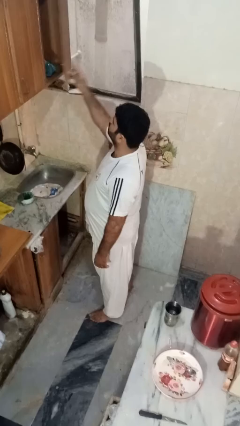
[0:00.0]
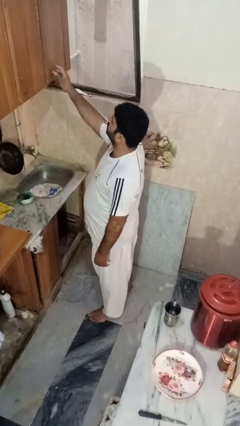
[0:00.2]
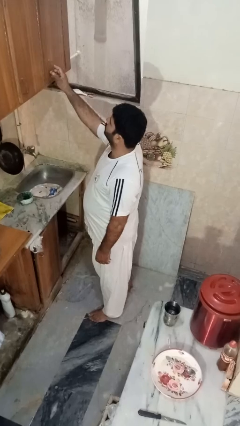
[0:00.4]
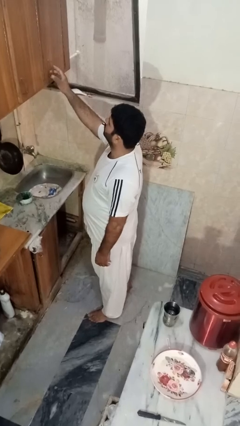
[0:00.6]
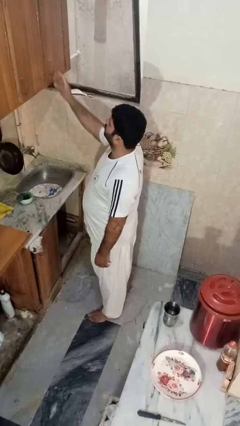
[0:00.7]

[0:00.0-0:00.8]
person closes cabinet

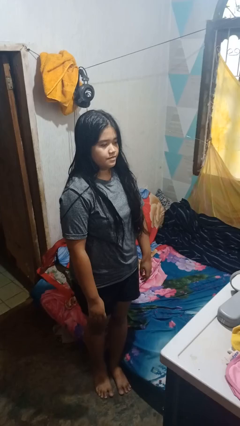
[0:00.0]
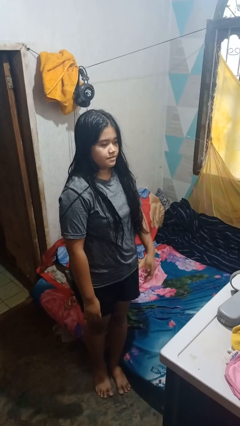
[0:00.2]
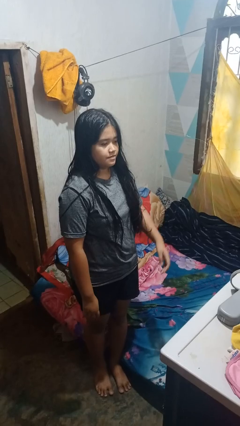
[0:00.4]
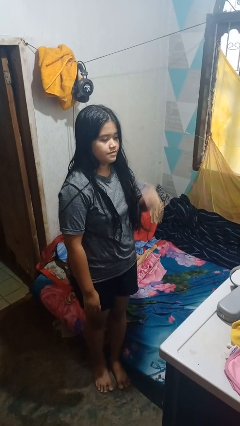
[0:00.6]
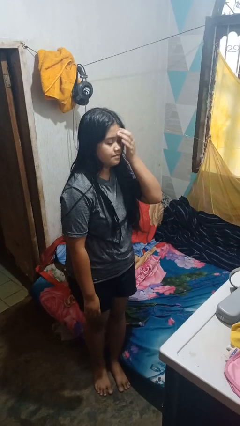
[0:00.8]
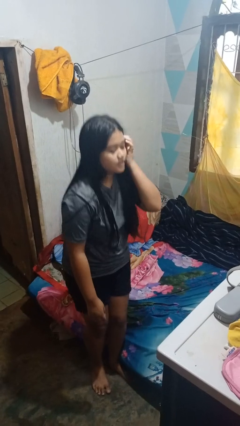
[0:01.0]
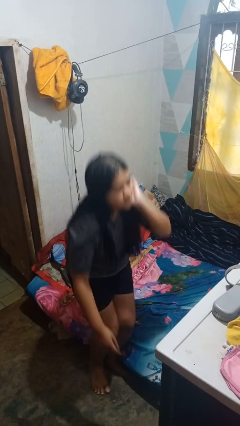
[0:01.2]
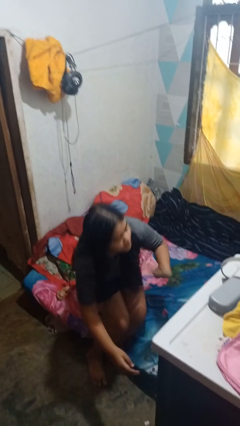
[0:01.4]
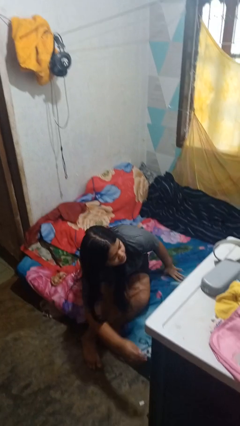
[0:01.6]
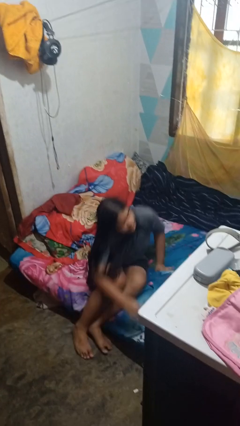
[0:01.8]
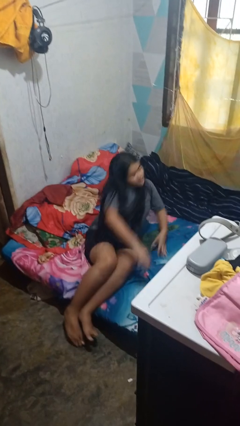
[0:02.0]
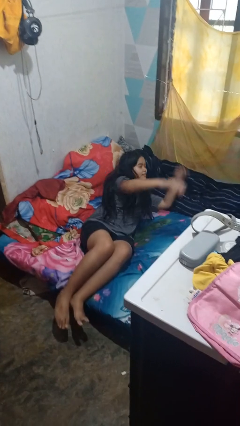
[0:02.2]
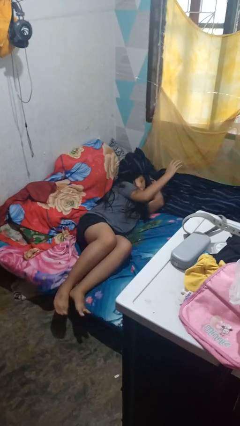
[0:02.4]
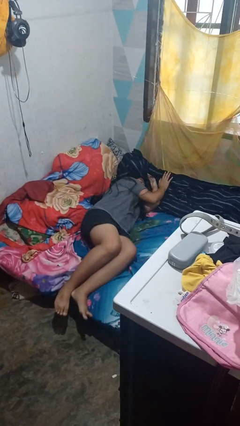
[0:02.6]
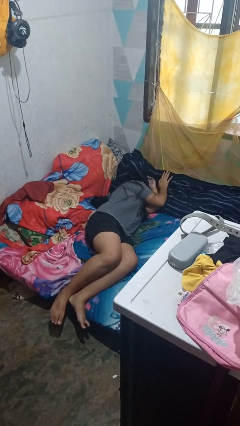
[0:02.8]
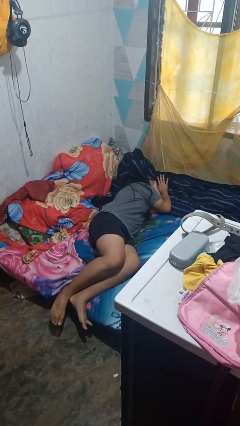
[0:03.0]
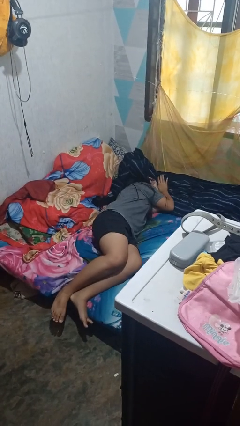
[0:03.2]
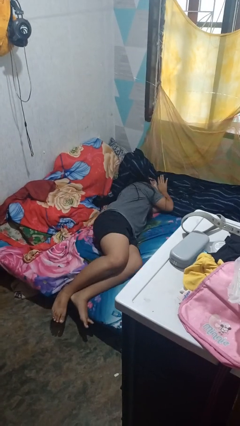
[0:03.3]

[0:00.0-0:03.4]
person lies down on bed

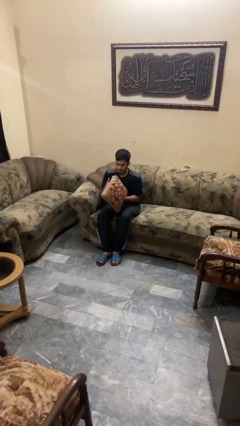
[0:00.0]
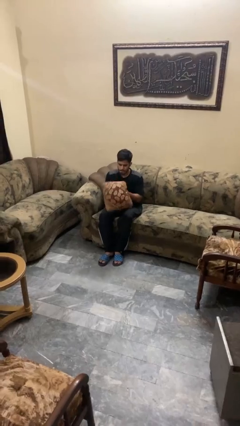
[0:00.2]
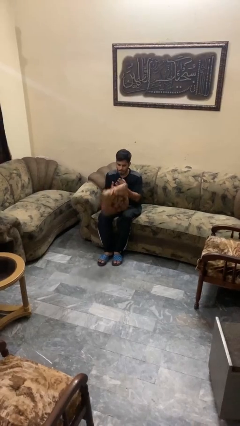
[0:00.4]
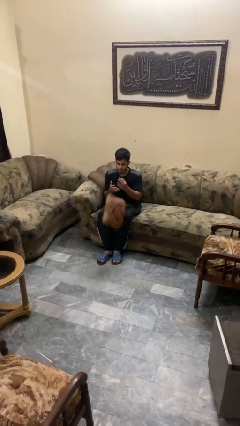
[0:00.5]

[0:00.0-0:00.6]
person picks up object from floor

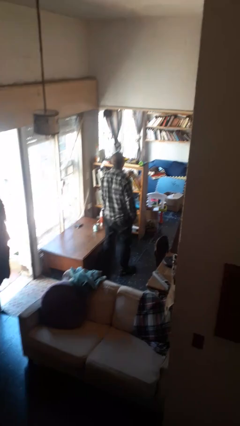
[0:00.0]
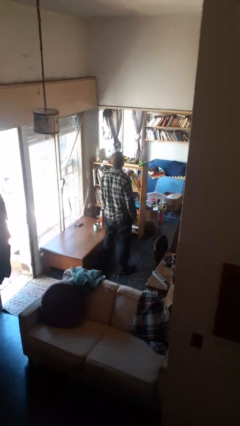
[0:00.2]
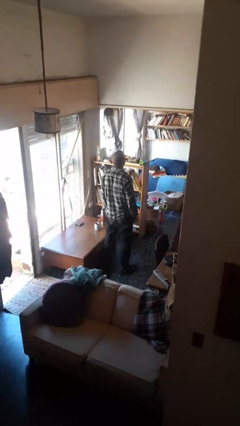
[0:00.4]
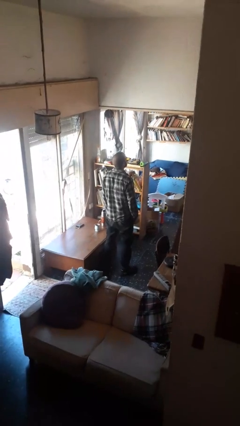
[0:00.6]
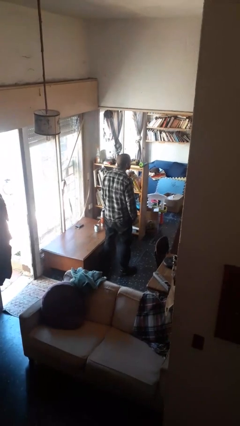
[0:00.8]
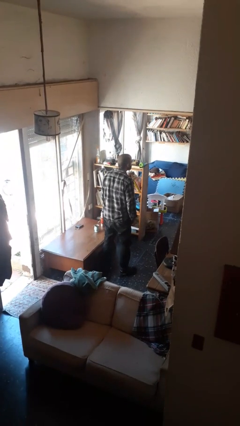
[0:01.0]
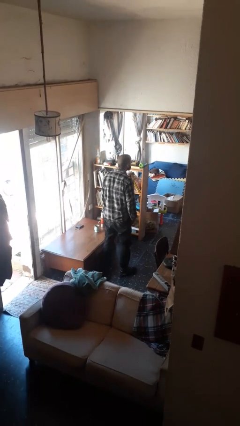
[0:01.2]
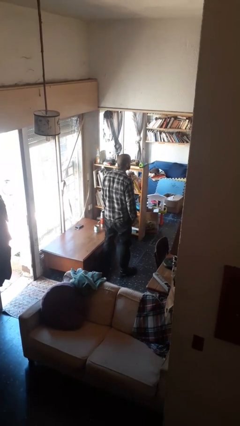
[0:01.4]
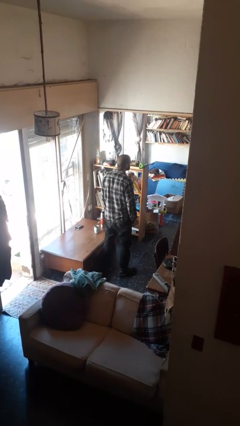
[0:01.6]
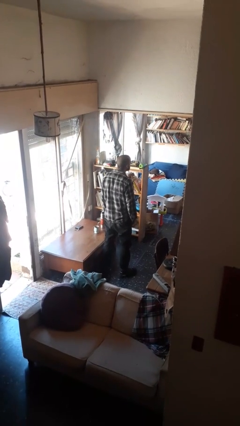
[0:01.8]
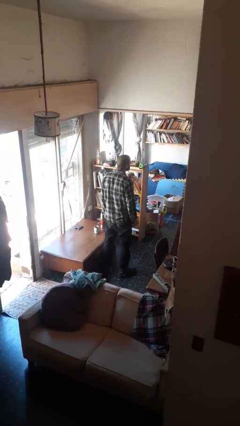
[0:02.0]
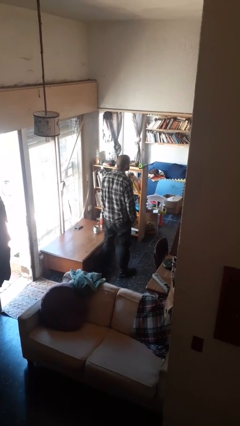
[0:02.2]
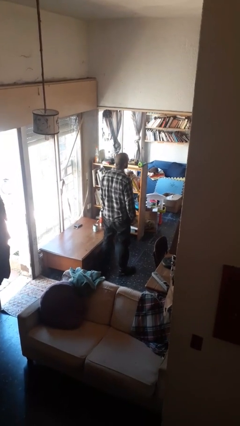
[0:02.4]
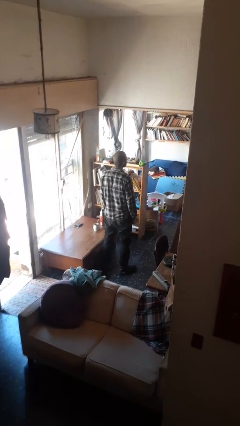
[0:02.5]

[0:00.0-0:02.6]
person sticks out tongue

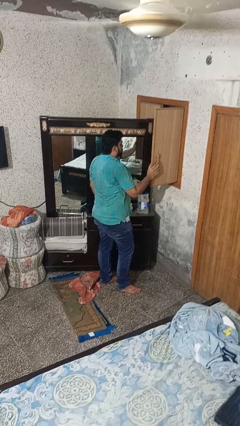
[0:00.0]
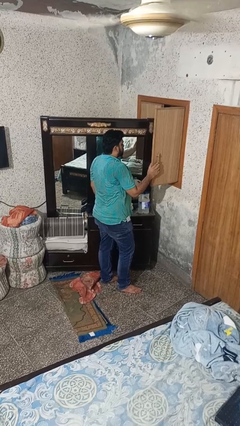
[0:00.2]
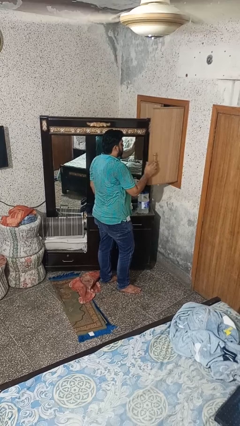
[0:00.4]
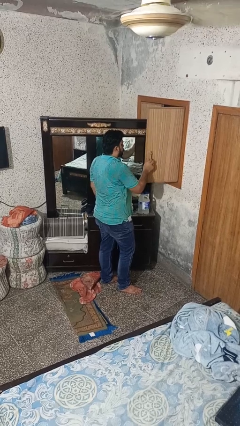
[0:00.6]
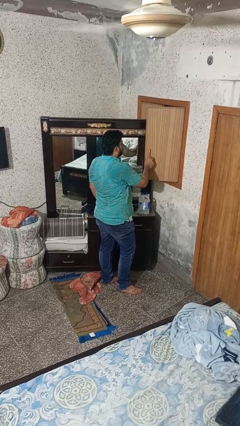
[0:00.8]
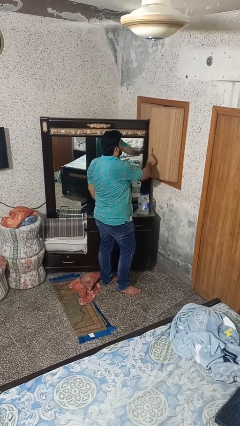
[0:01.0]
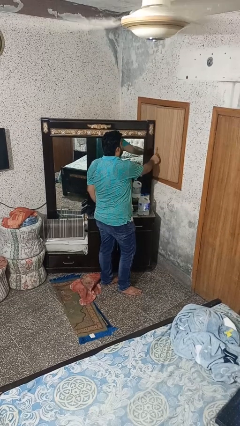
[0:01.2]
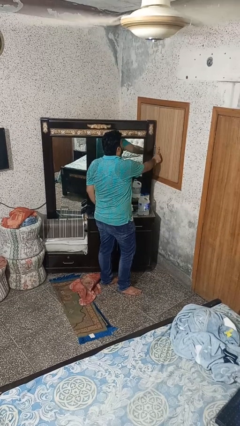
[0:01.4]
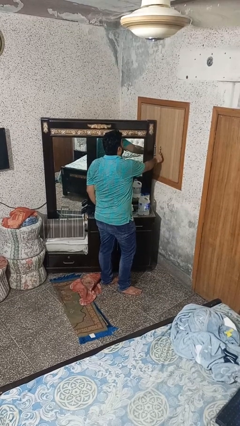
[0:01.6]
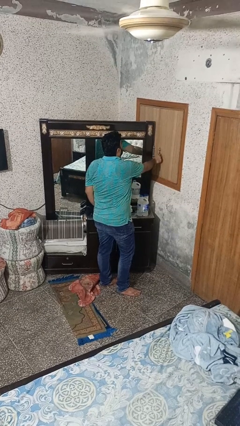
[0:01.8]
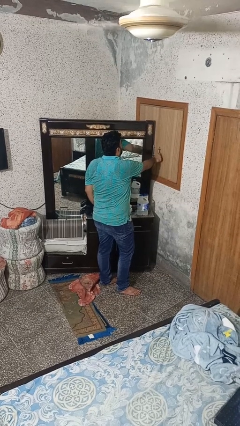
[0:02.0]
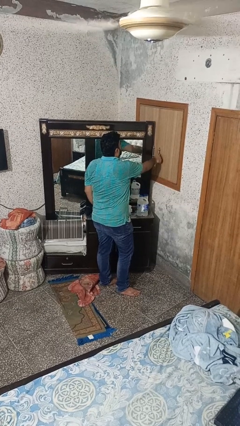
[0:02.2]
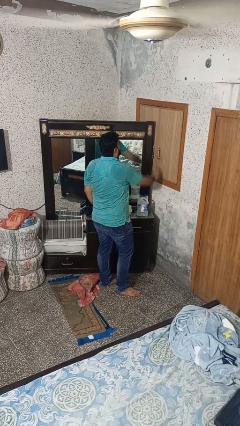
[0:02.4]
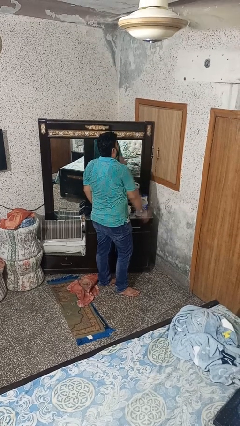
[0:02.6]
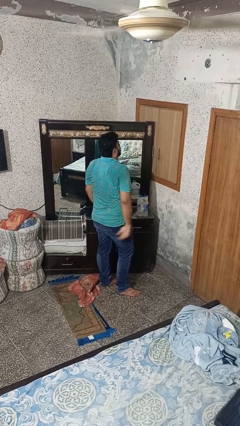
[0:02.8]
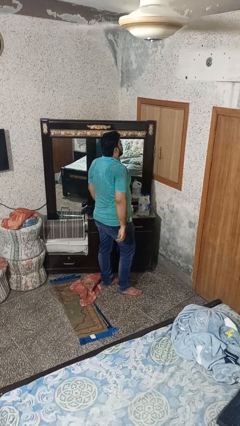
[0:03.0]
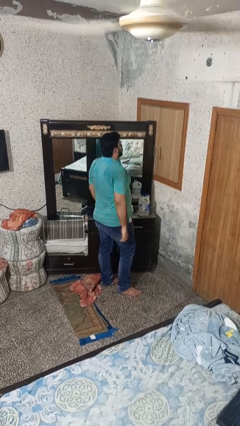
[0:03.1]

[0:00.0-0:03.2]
person closes home window

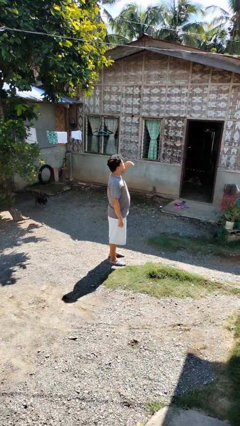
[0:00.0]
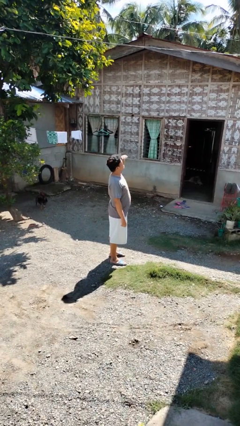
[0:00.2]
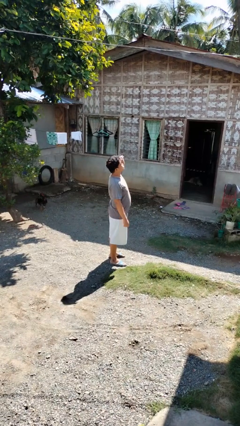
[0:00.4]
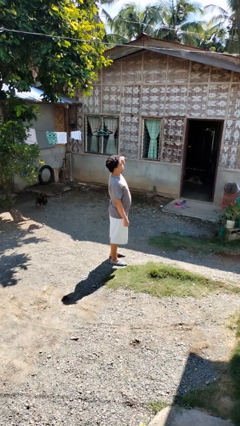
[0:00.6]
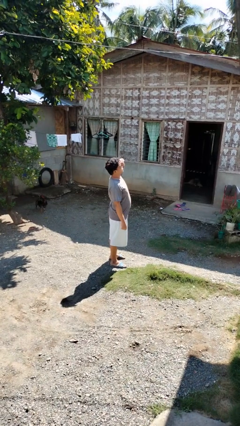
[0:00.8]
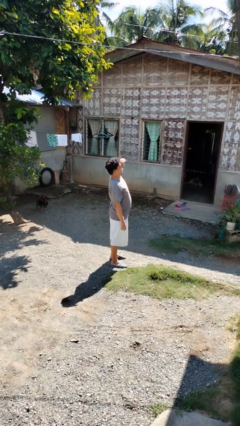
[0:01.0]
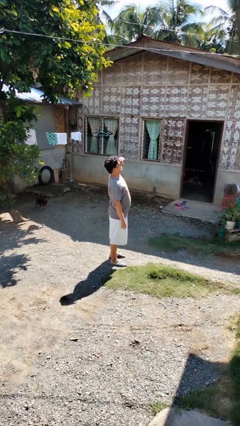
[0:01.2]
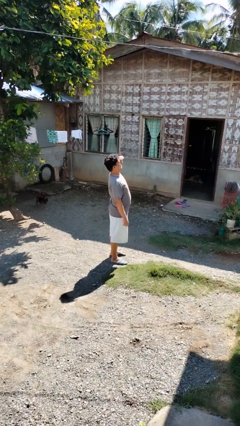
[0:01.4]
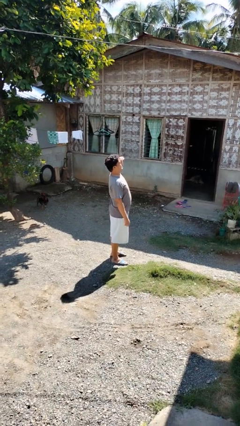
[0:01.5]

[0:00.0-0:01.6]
person shades eyes

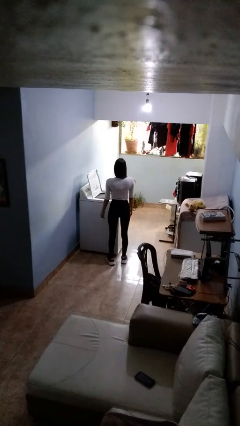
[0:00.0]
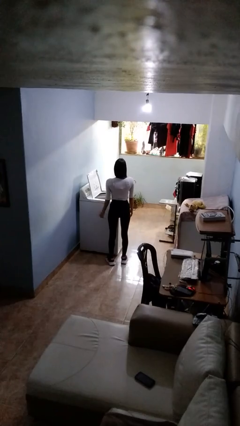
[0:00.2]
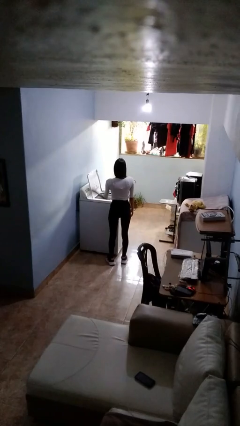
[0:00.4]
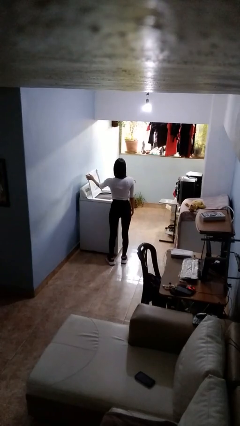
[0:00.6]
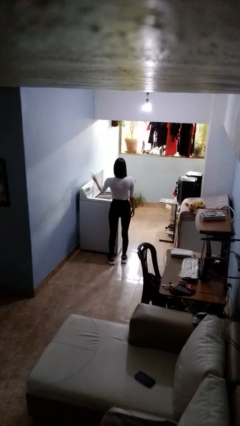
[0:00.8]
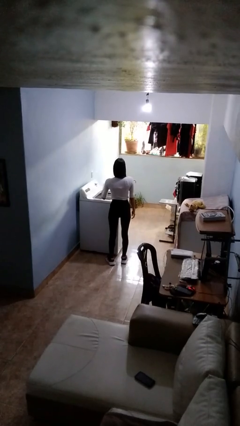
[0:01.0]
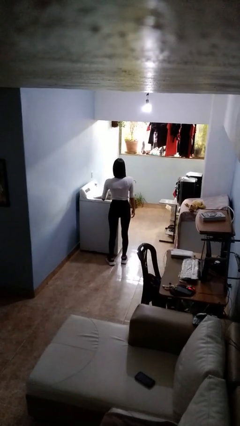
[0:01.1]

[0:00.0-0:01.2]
person closes clothes washer

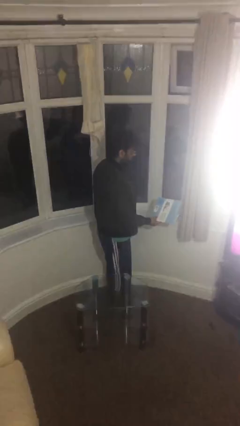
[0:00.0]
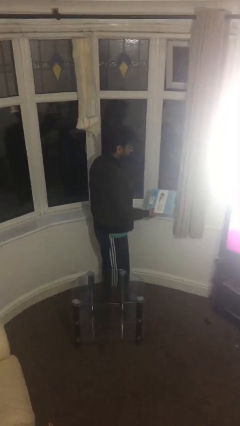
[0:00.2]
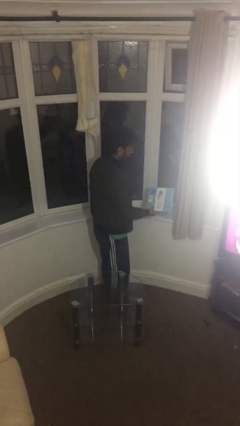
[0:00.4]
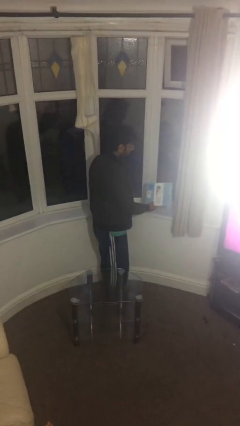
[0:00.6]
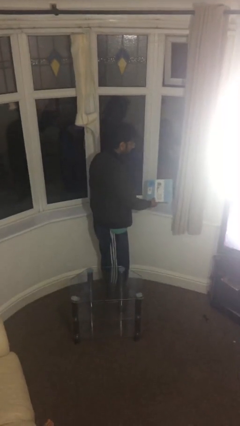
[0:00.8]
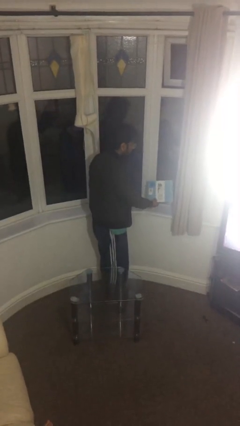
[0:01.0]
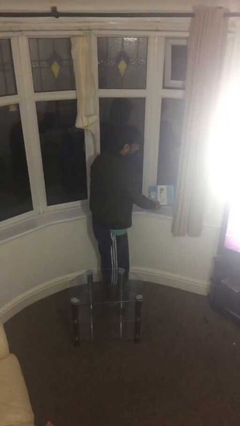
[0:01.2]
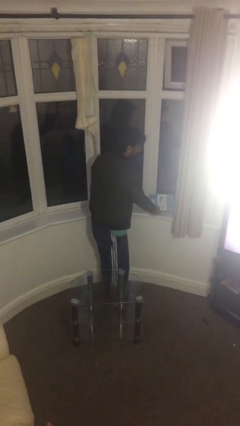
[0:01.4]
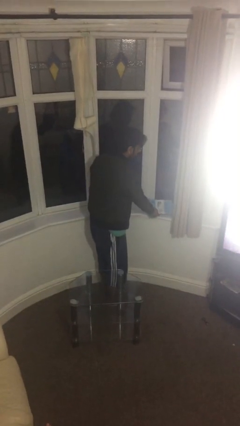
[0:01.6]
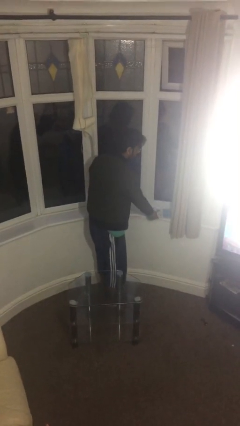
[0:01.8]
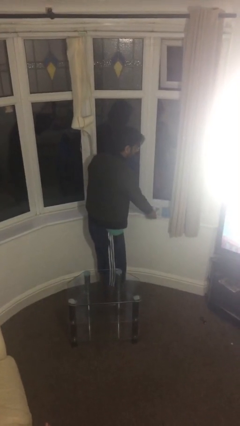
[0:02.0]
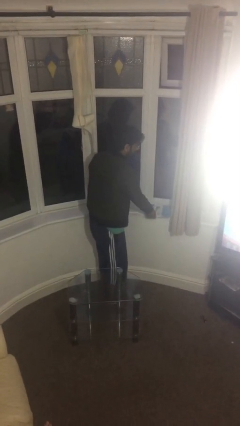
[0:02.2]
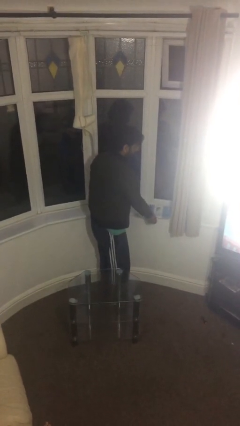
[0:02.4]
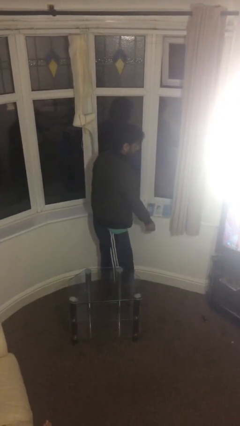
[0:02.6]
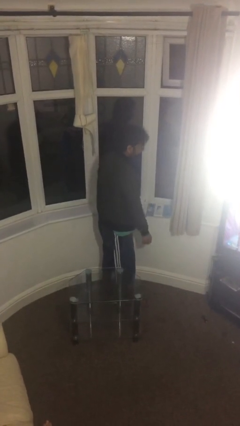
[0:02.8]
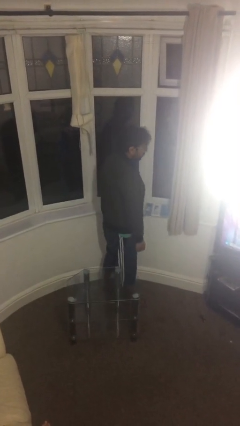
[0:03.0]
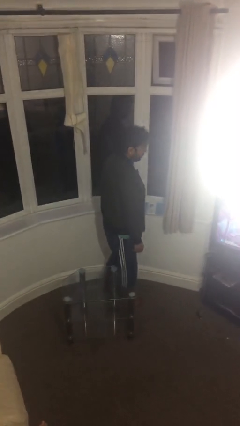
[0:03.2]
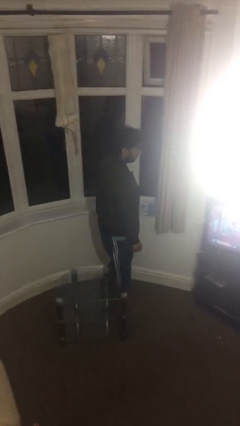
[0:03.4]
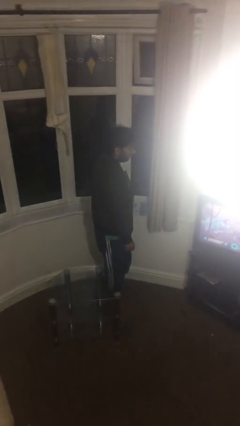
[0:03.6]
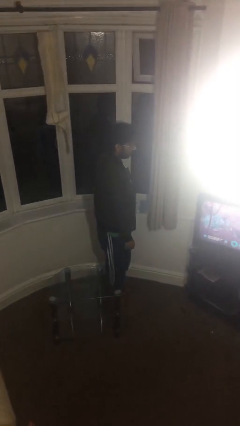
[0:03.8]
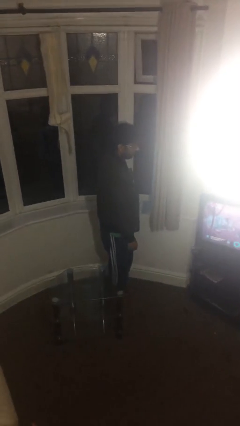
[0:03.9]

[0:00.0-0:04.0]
person puts down object on shelf
